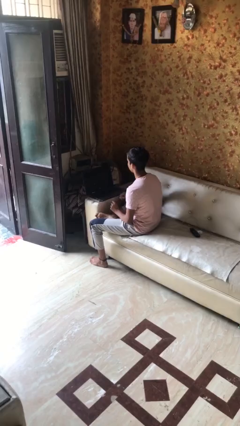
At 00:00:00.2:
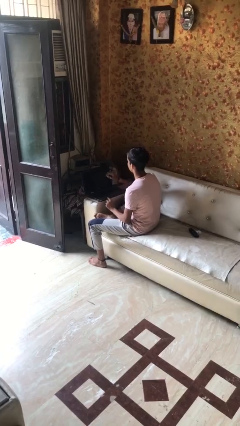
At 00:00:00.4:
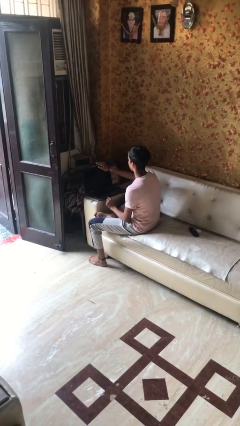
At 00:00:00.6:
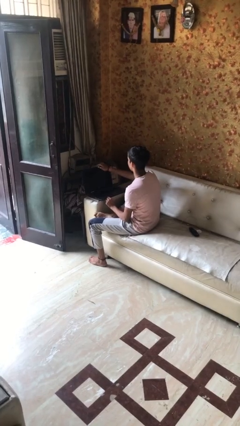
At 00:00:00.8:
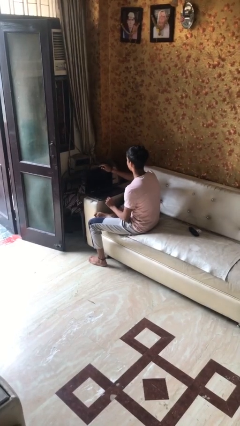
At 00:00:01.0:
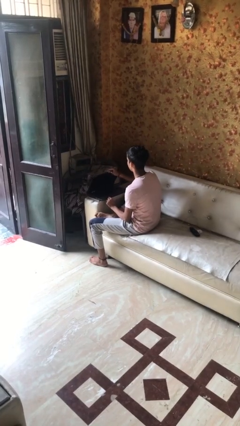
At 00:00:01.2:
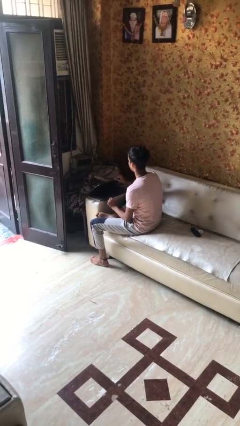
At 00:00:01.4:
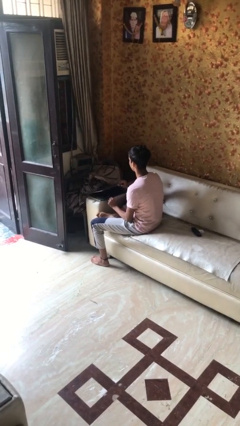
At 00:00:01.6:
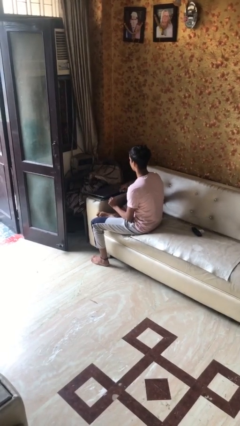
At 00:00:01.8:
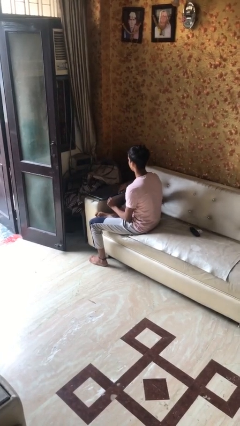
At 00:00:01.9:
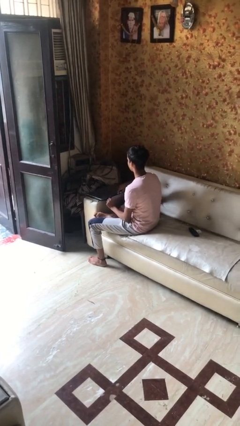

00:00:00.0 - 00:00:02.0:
person closes laptop

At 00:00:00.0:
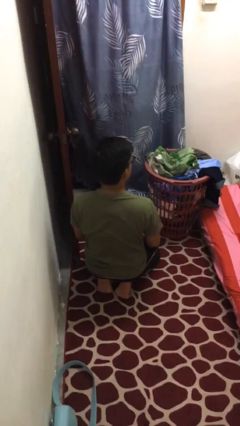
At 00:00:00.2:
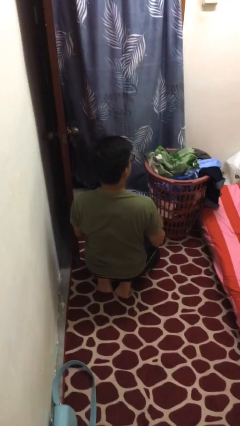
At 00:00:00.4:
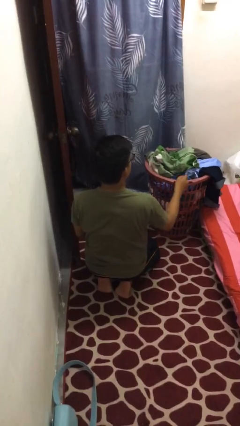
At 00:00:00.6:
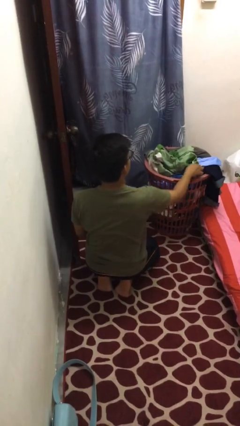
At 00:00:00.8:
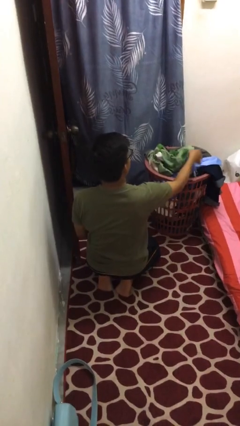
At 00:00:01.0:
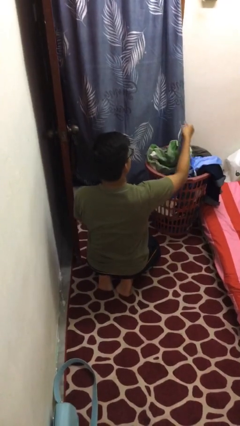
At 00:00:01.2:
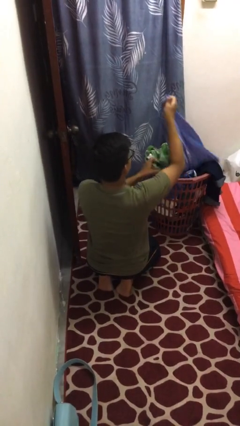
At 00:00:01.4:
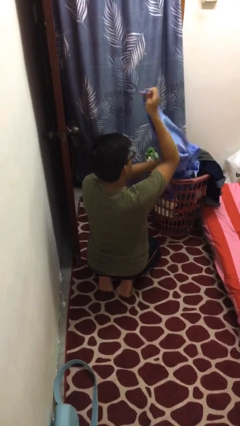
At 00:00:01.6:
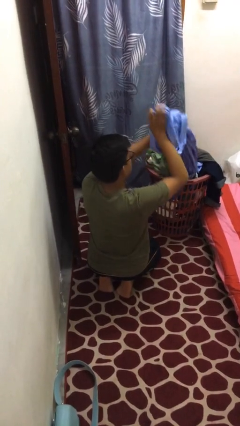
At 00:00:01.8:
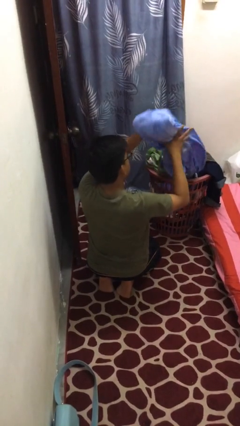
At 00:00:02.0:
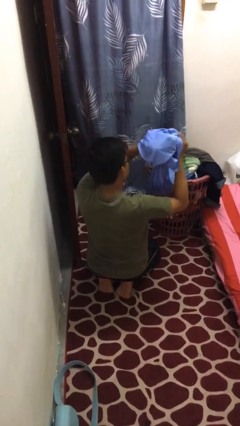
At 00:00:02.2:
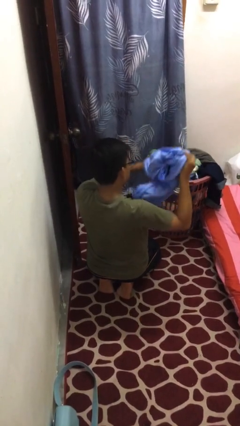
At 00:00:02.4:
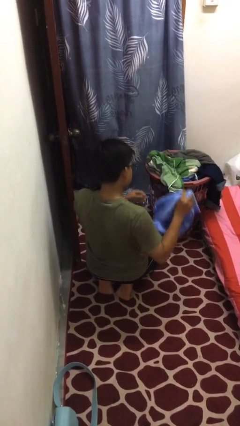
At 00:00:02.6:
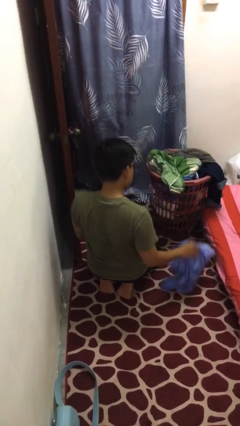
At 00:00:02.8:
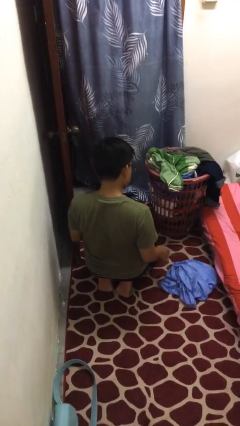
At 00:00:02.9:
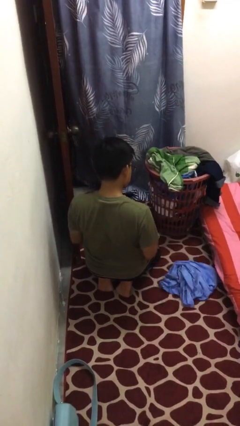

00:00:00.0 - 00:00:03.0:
person takes object from basket

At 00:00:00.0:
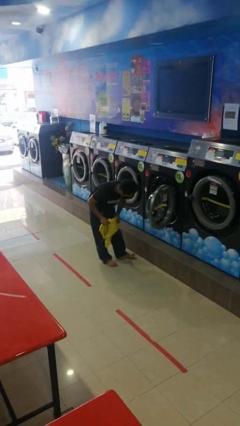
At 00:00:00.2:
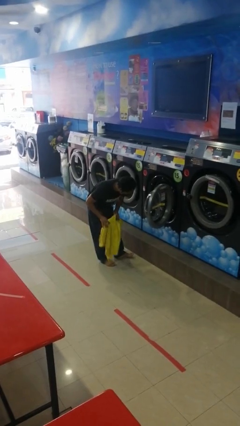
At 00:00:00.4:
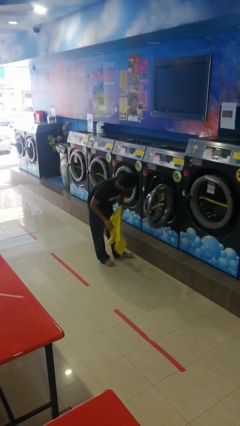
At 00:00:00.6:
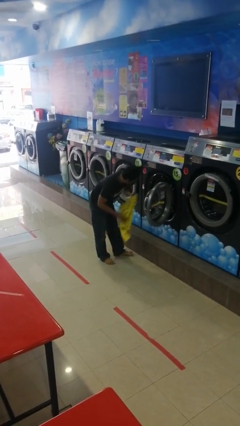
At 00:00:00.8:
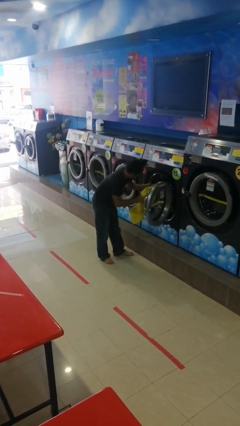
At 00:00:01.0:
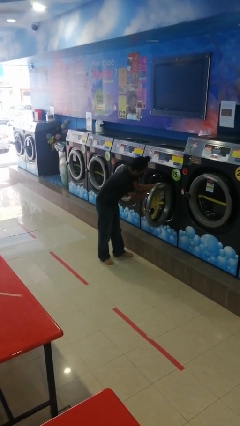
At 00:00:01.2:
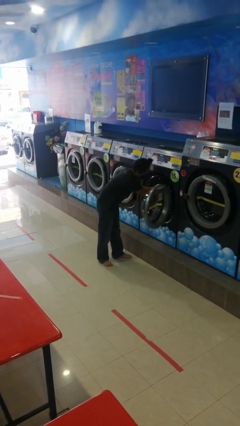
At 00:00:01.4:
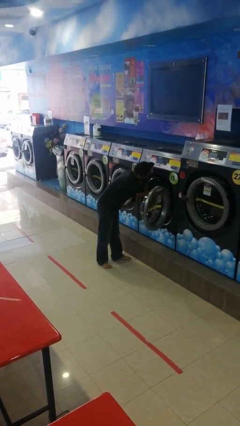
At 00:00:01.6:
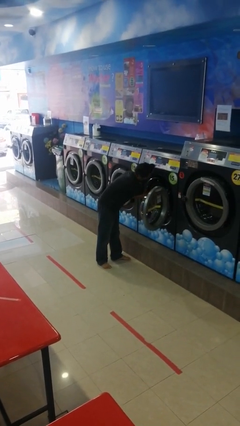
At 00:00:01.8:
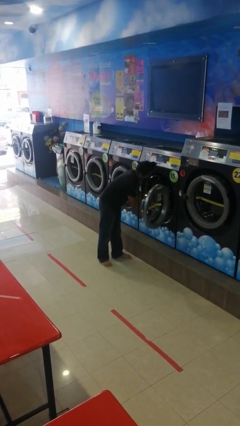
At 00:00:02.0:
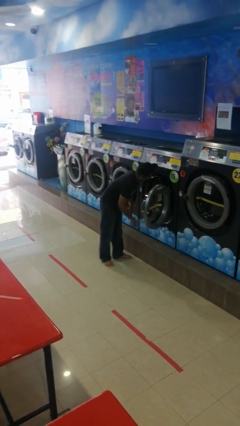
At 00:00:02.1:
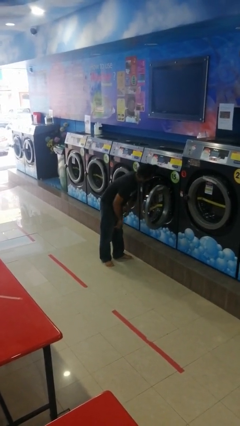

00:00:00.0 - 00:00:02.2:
person loads clotheswasher

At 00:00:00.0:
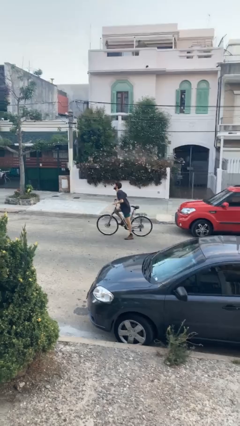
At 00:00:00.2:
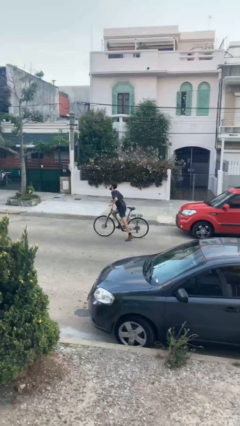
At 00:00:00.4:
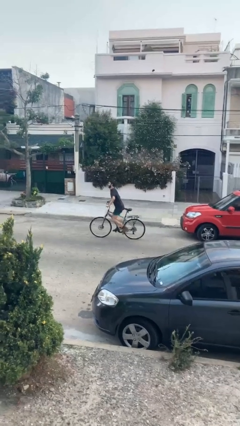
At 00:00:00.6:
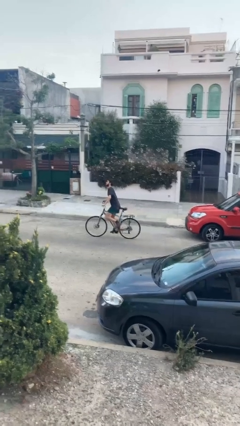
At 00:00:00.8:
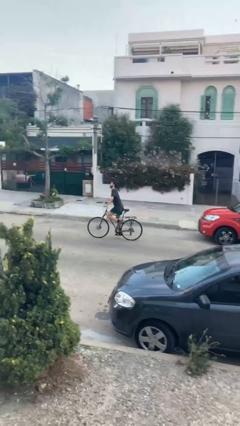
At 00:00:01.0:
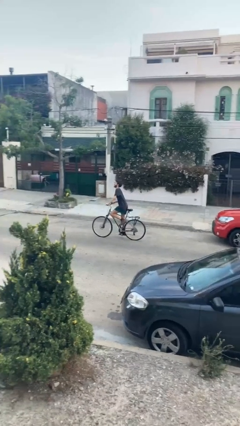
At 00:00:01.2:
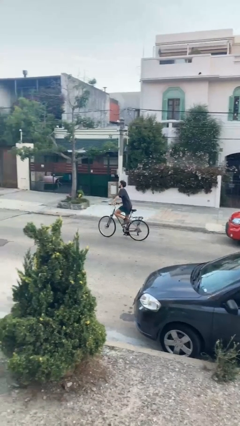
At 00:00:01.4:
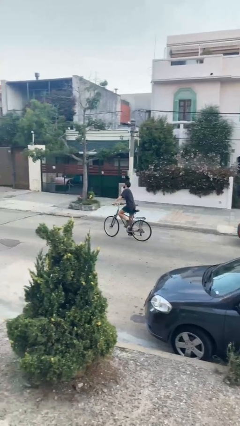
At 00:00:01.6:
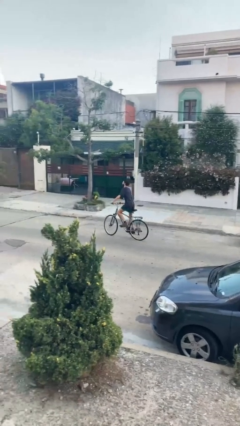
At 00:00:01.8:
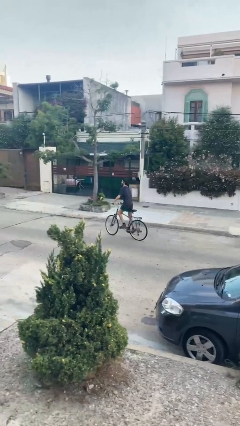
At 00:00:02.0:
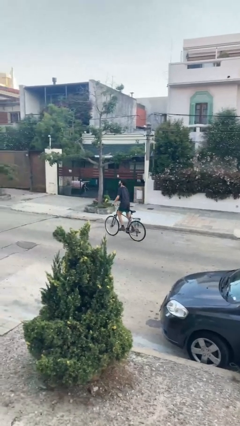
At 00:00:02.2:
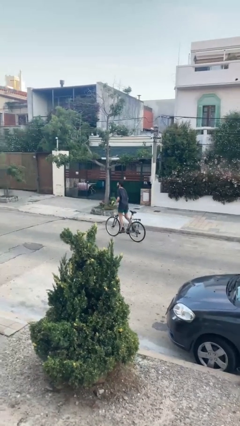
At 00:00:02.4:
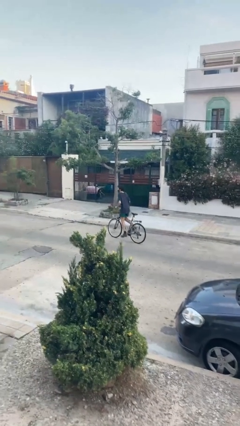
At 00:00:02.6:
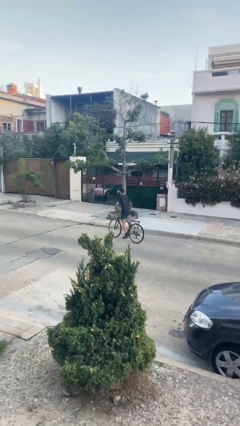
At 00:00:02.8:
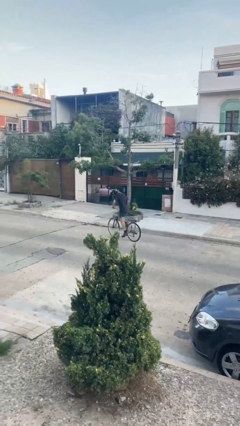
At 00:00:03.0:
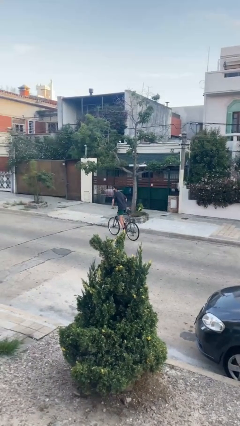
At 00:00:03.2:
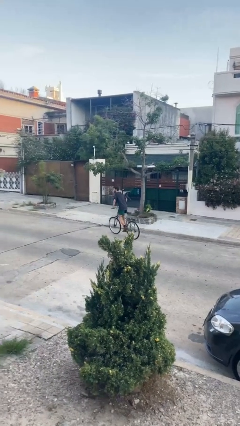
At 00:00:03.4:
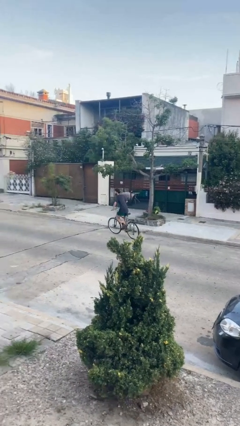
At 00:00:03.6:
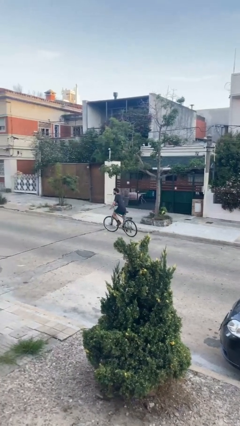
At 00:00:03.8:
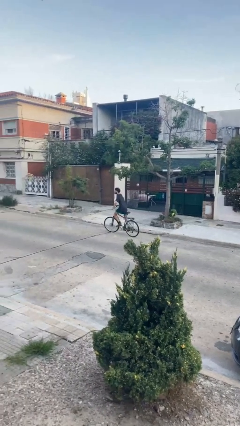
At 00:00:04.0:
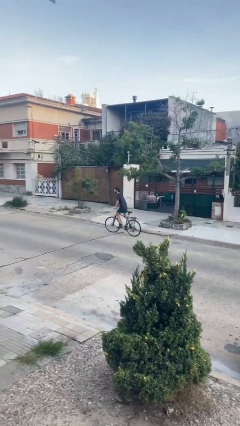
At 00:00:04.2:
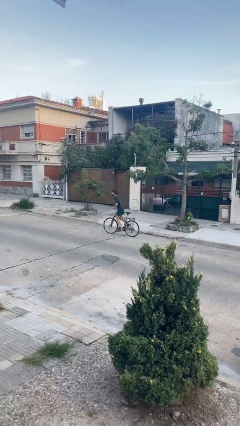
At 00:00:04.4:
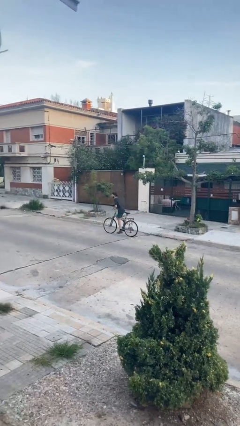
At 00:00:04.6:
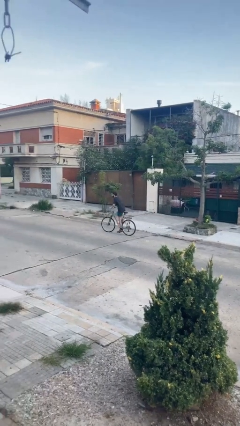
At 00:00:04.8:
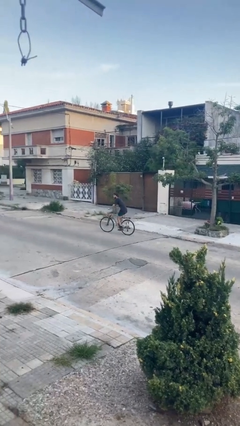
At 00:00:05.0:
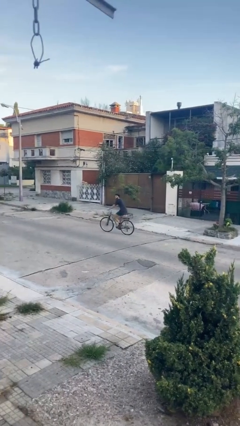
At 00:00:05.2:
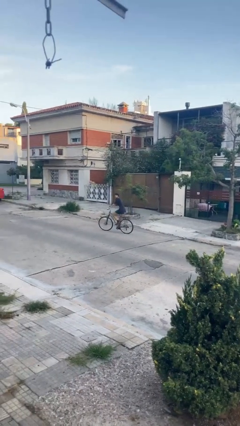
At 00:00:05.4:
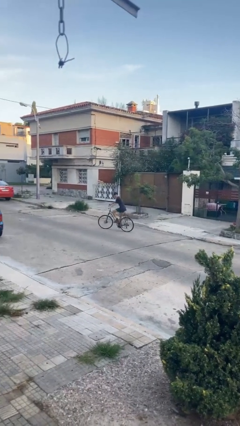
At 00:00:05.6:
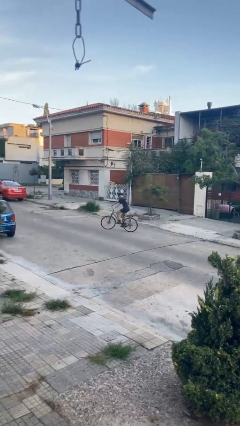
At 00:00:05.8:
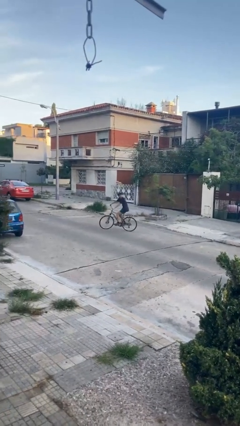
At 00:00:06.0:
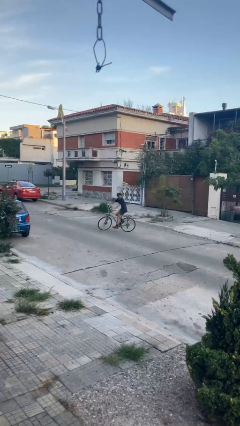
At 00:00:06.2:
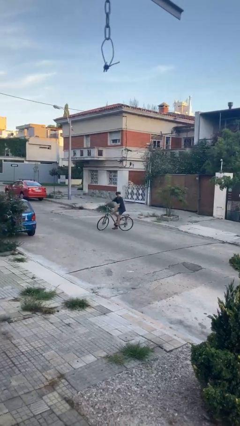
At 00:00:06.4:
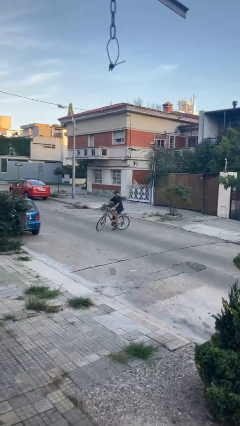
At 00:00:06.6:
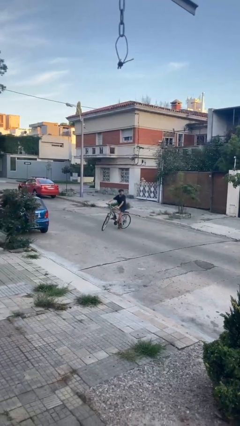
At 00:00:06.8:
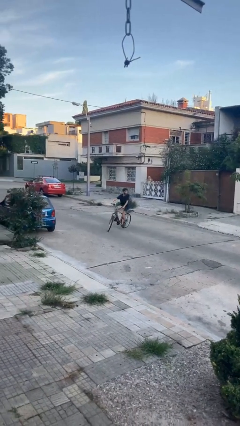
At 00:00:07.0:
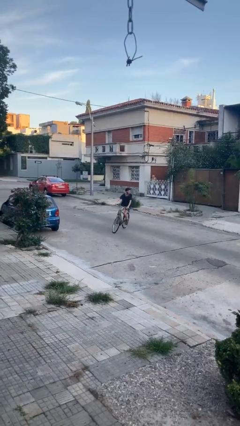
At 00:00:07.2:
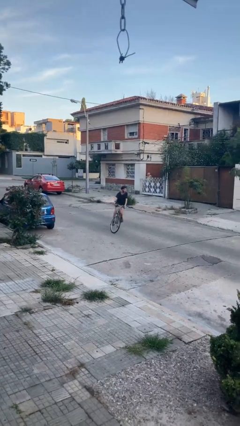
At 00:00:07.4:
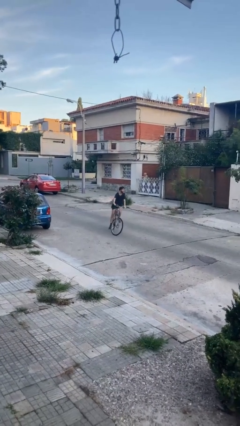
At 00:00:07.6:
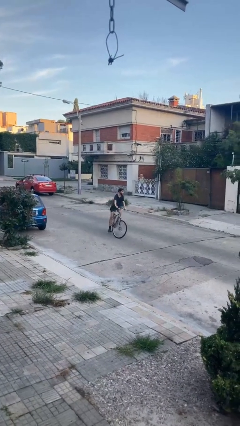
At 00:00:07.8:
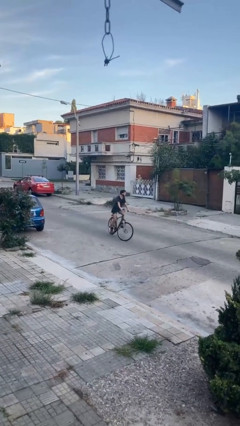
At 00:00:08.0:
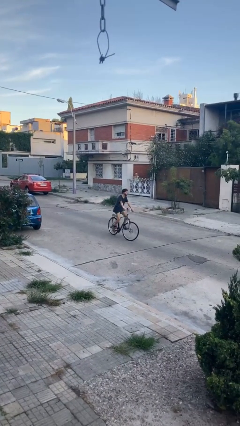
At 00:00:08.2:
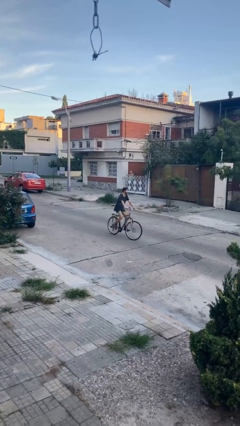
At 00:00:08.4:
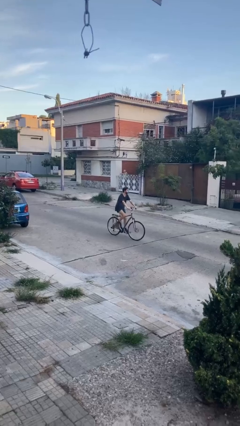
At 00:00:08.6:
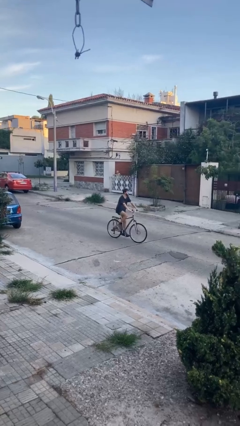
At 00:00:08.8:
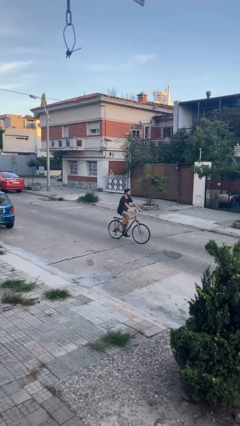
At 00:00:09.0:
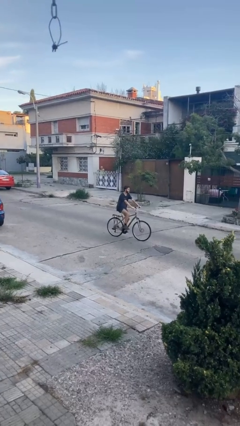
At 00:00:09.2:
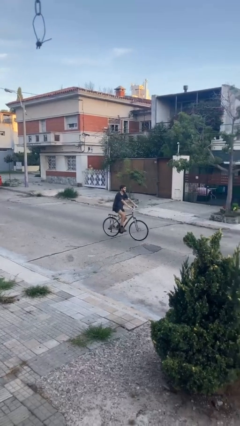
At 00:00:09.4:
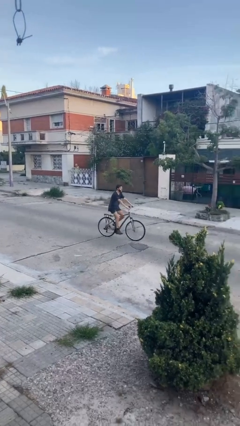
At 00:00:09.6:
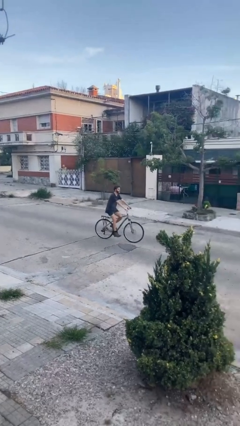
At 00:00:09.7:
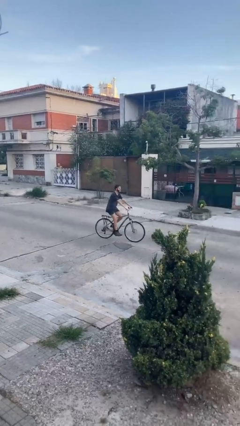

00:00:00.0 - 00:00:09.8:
person rides bicycle
